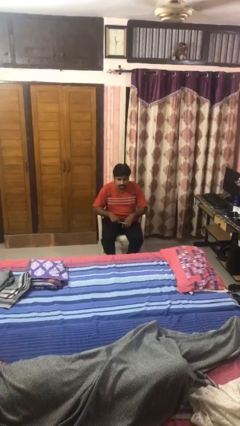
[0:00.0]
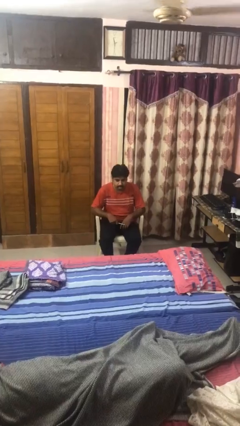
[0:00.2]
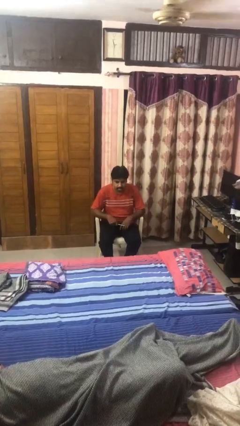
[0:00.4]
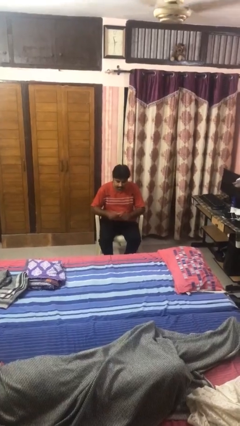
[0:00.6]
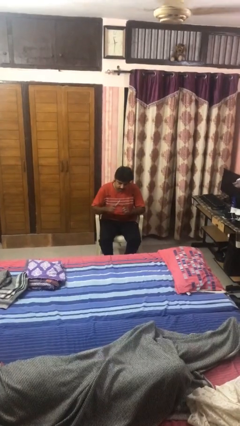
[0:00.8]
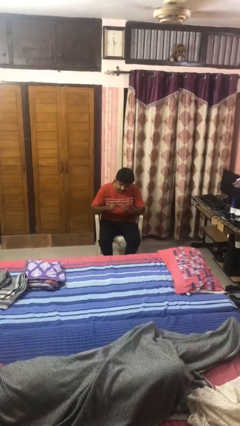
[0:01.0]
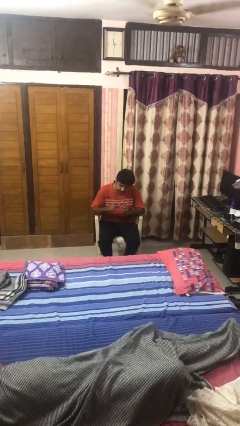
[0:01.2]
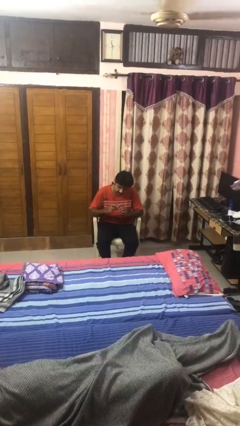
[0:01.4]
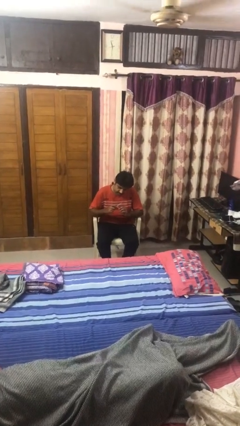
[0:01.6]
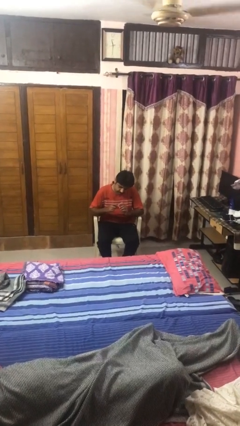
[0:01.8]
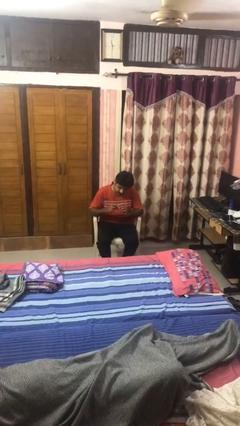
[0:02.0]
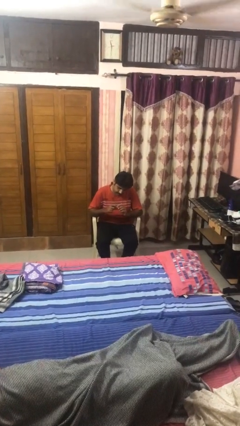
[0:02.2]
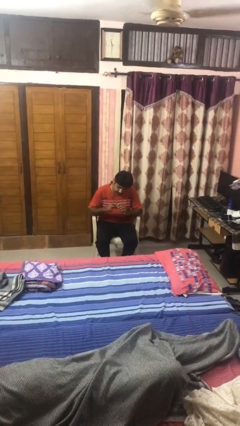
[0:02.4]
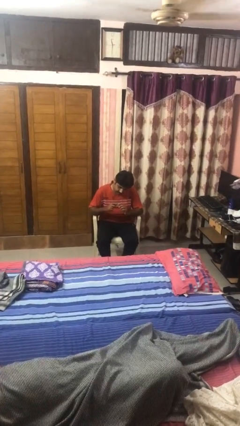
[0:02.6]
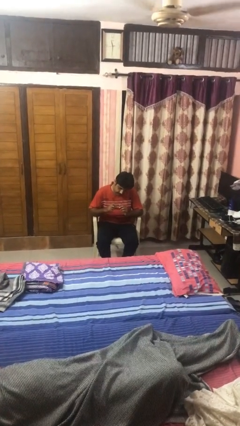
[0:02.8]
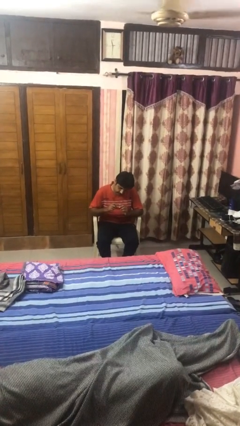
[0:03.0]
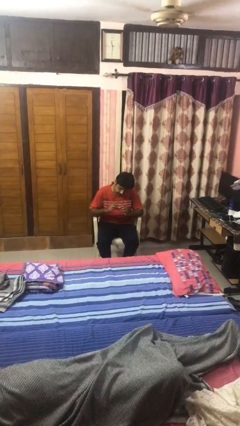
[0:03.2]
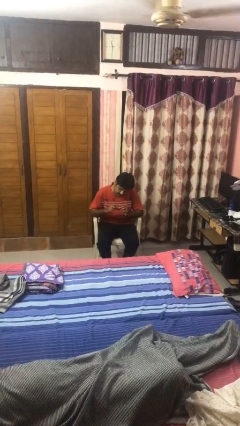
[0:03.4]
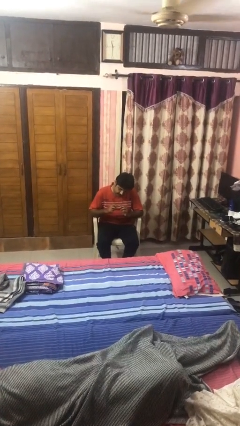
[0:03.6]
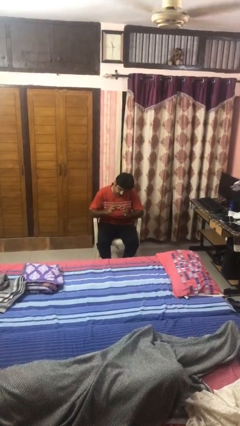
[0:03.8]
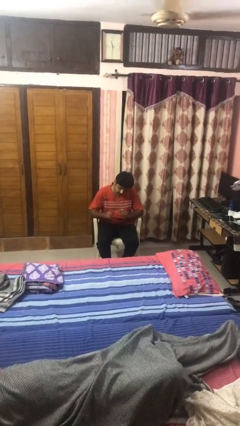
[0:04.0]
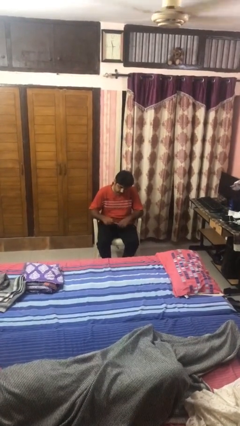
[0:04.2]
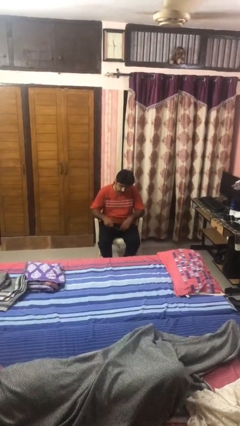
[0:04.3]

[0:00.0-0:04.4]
person files fingernails

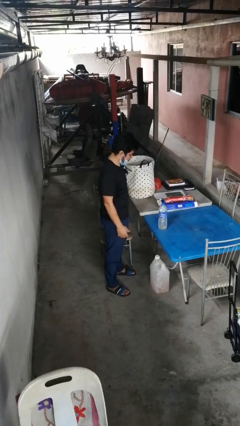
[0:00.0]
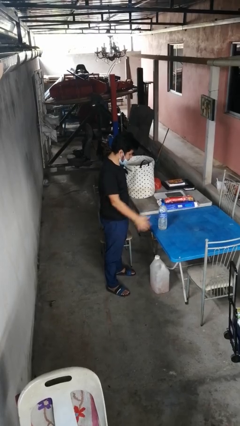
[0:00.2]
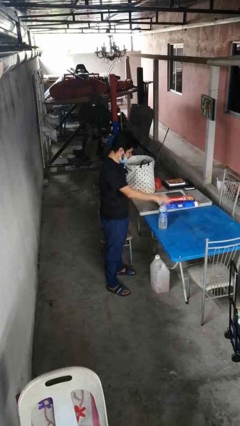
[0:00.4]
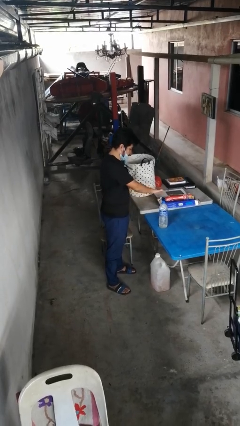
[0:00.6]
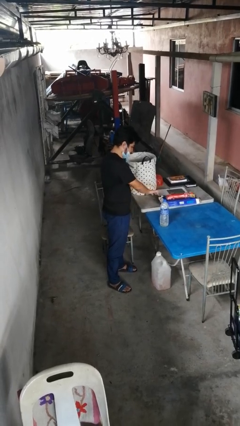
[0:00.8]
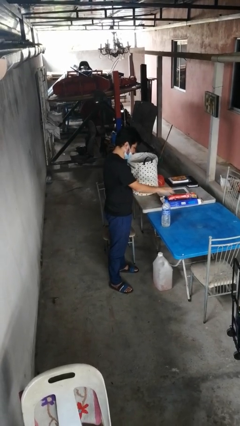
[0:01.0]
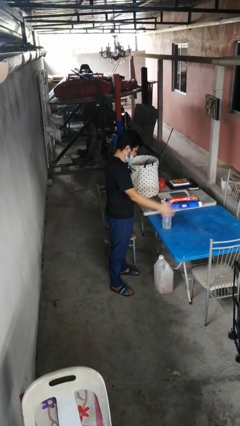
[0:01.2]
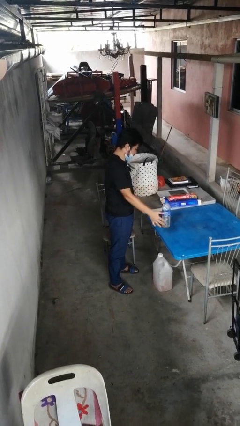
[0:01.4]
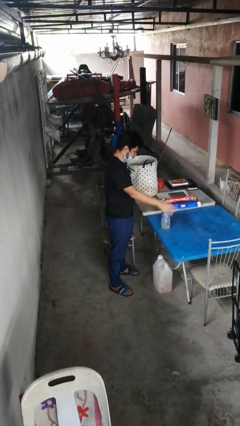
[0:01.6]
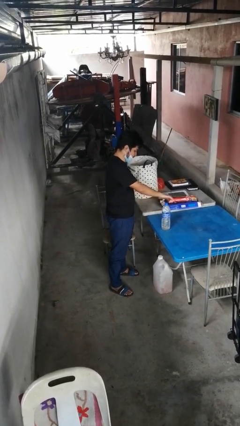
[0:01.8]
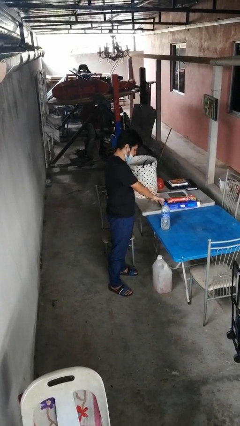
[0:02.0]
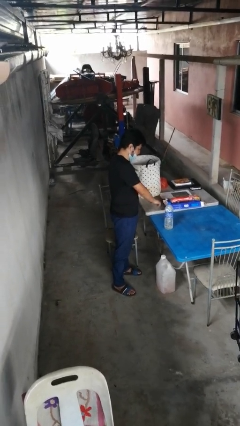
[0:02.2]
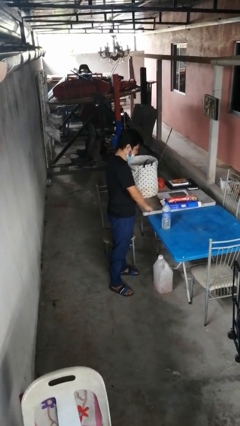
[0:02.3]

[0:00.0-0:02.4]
person waves hand over object

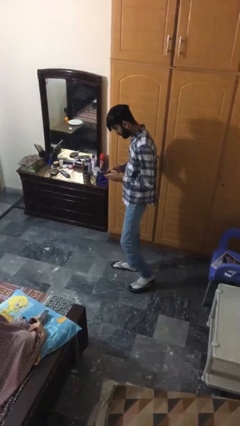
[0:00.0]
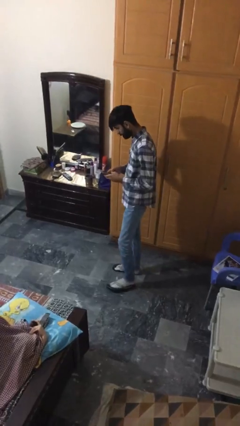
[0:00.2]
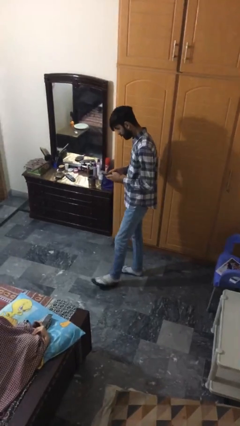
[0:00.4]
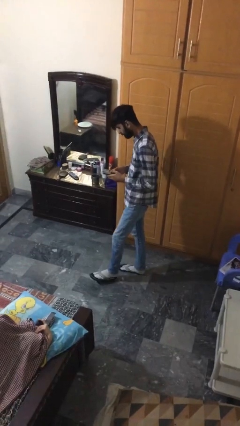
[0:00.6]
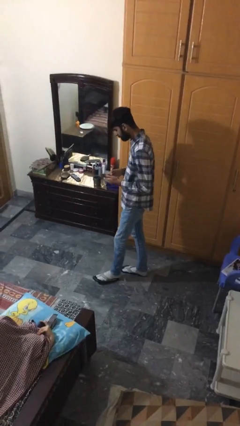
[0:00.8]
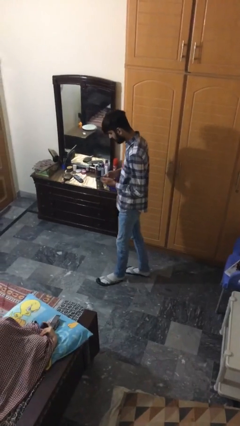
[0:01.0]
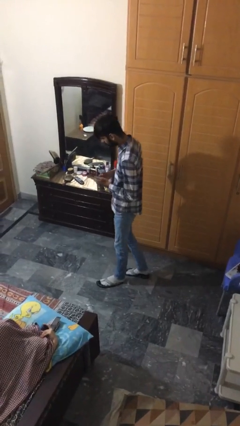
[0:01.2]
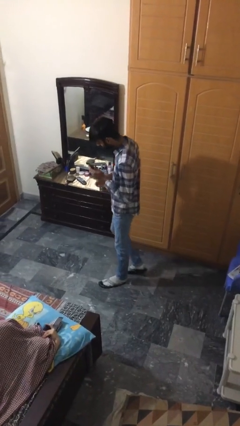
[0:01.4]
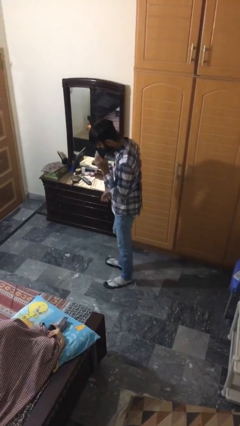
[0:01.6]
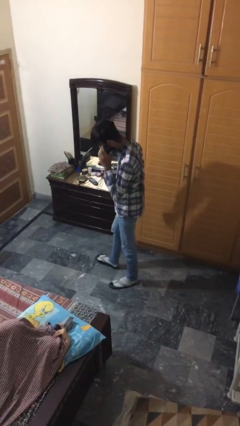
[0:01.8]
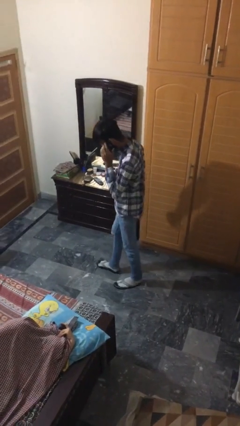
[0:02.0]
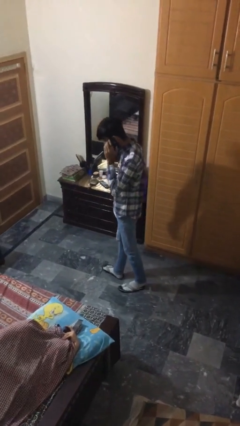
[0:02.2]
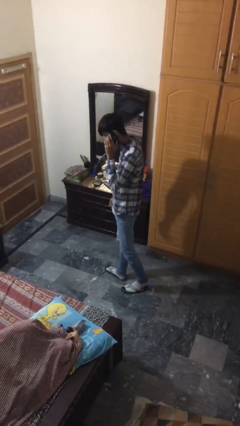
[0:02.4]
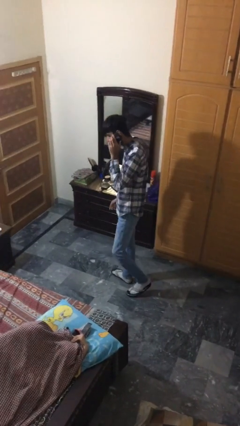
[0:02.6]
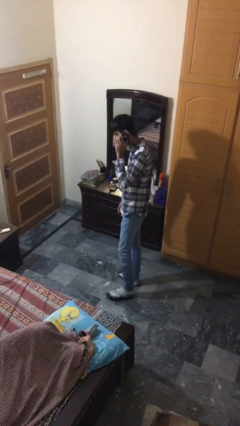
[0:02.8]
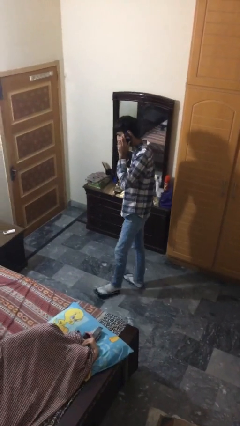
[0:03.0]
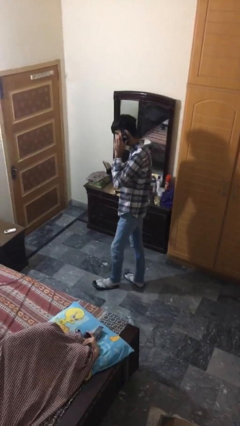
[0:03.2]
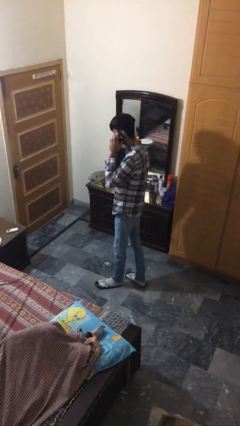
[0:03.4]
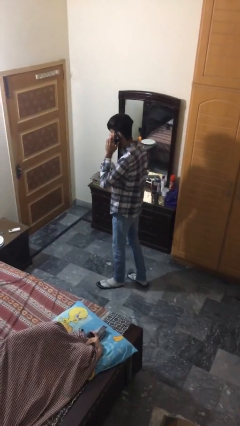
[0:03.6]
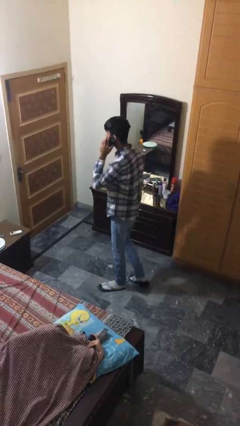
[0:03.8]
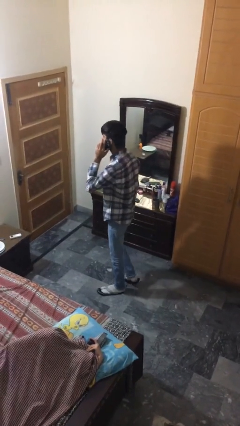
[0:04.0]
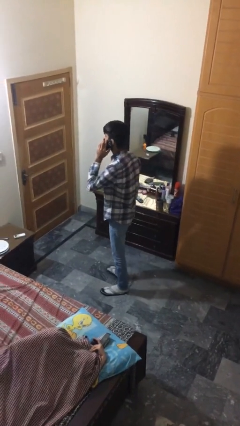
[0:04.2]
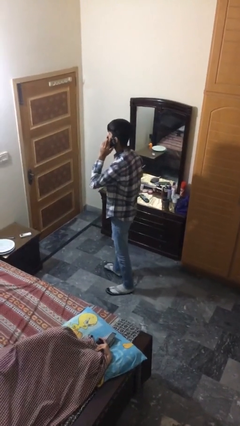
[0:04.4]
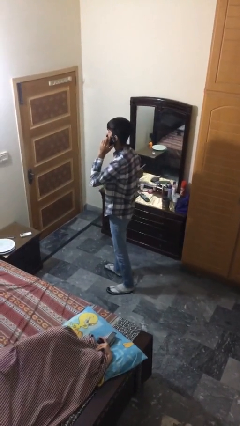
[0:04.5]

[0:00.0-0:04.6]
person talks on phone

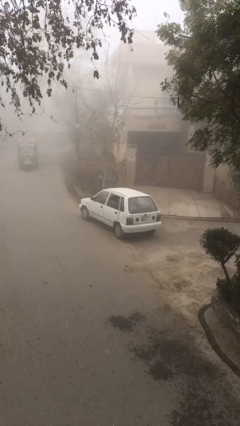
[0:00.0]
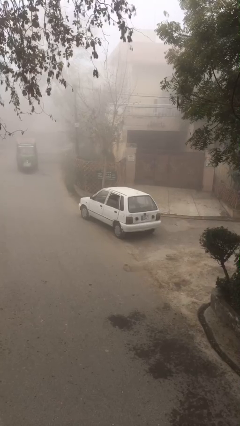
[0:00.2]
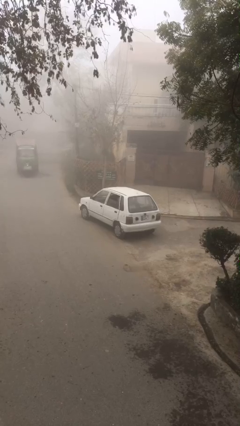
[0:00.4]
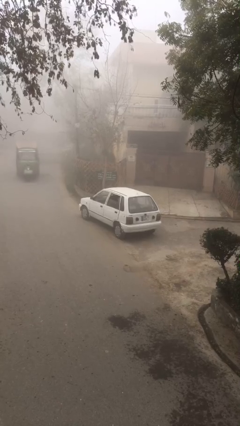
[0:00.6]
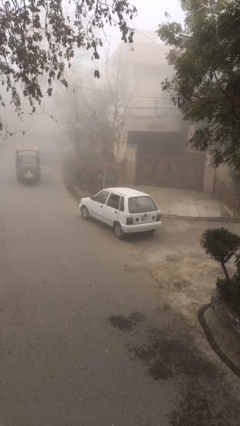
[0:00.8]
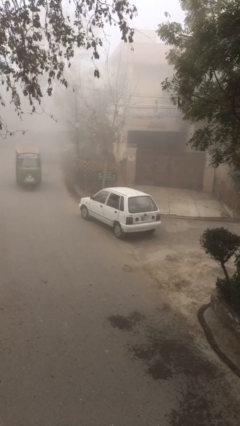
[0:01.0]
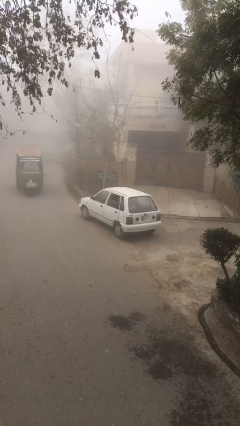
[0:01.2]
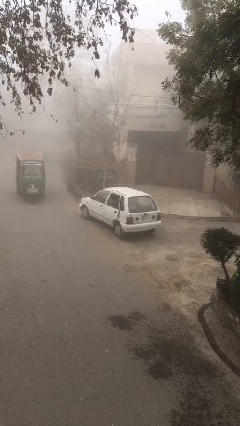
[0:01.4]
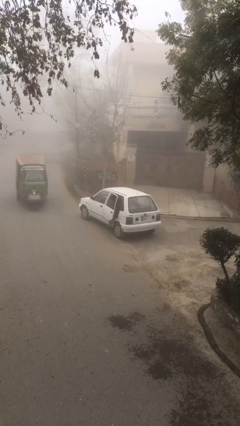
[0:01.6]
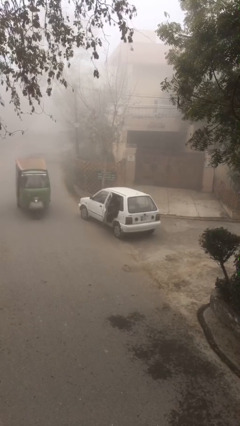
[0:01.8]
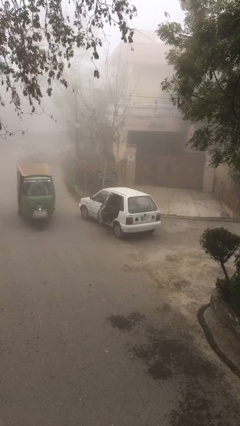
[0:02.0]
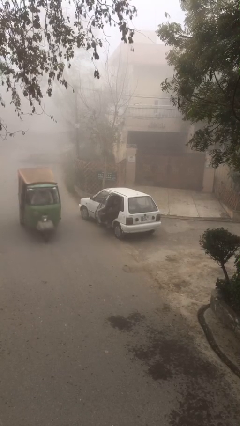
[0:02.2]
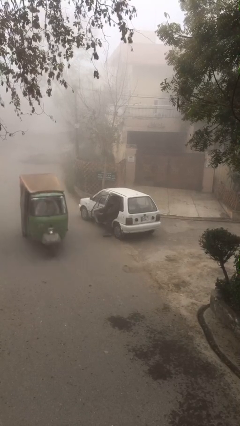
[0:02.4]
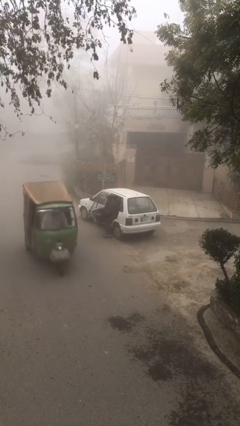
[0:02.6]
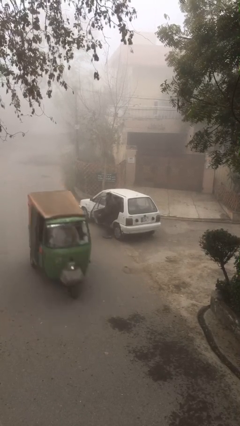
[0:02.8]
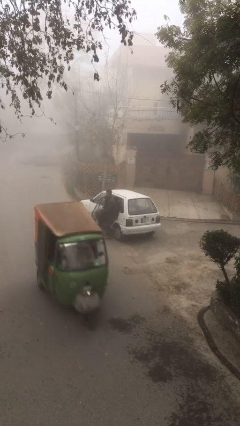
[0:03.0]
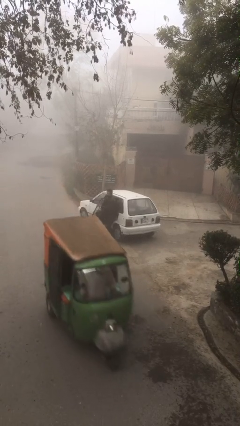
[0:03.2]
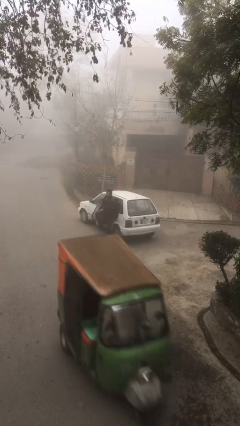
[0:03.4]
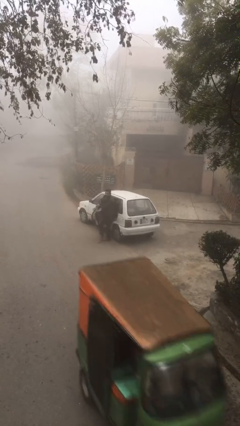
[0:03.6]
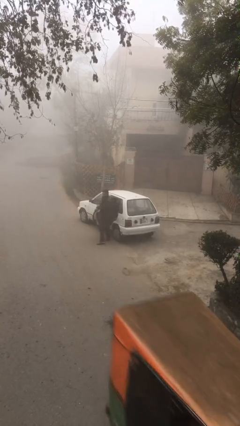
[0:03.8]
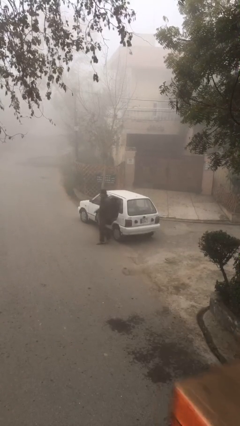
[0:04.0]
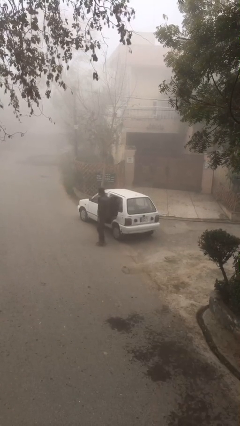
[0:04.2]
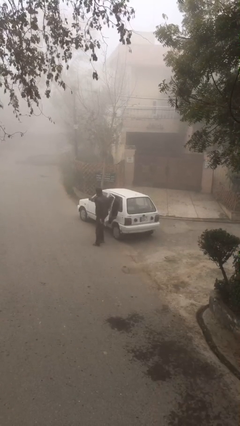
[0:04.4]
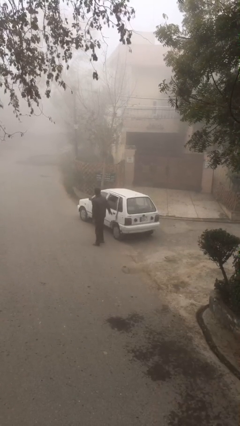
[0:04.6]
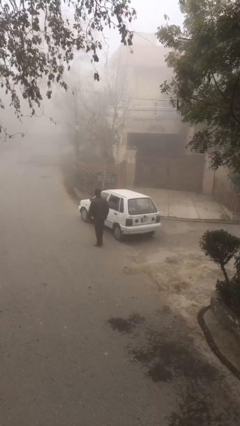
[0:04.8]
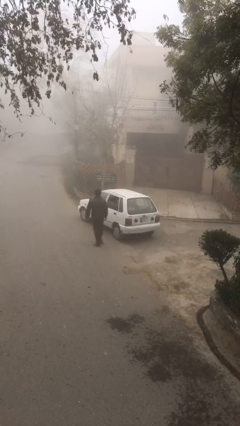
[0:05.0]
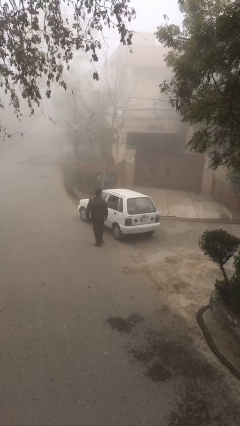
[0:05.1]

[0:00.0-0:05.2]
car drops off person

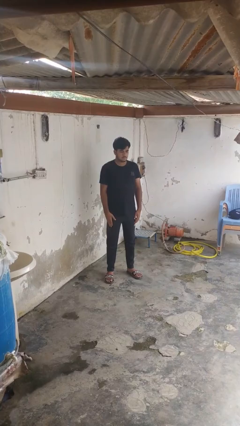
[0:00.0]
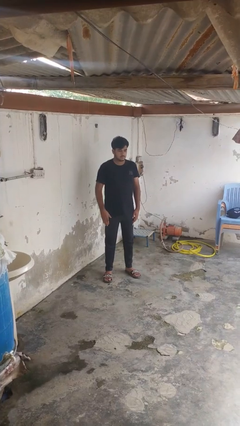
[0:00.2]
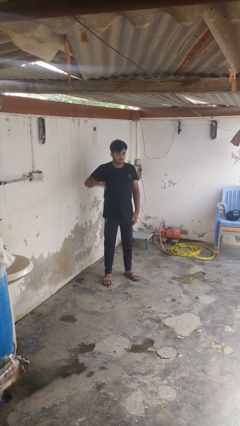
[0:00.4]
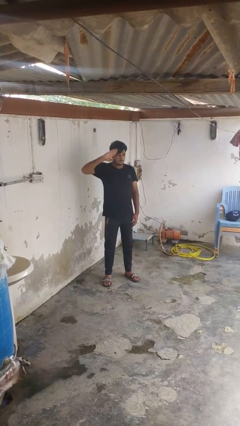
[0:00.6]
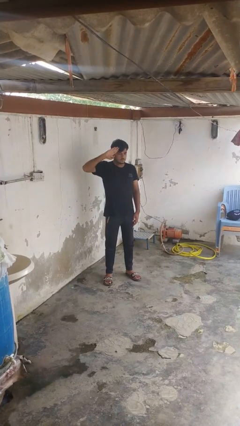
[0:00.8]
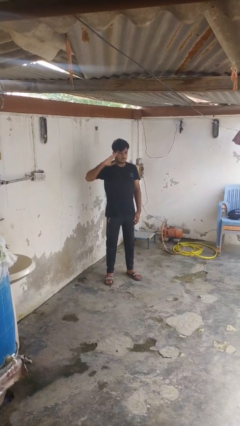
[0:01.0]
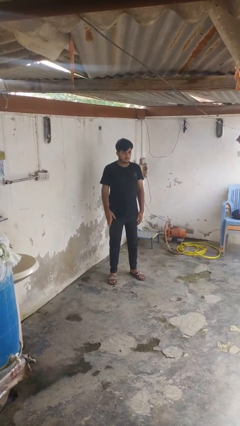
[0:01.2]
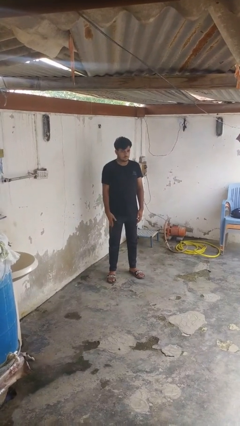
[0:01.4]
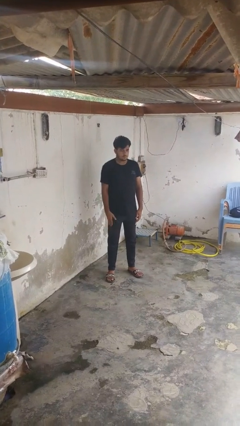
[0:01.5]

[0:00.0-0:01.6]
person salutes
